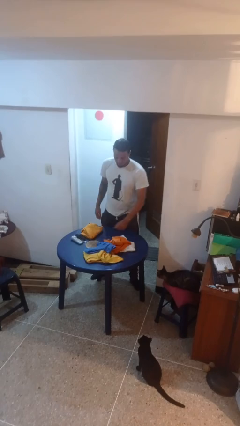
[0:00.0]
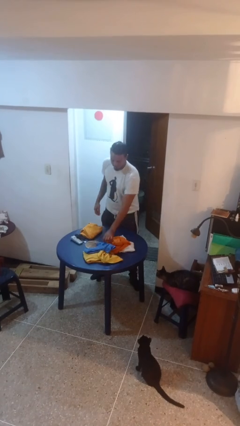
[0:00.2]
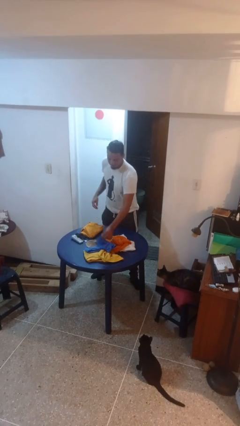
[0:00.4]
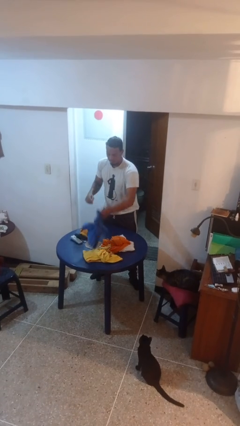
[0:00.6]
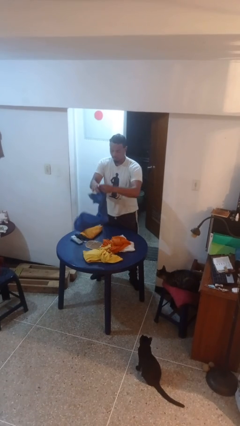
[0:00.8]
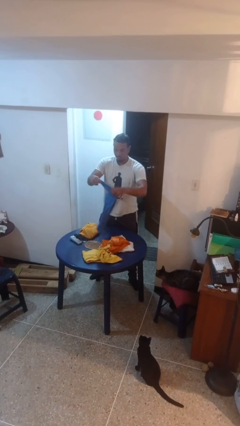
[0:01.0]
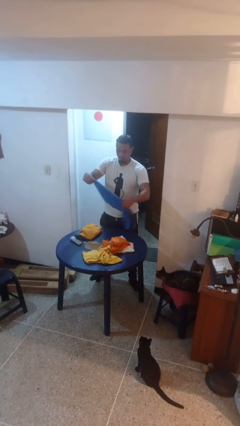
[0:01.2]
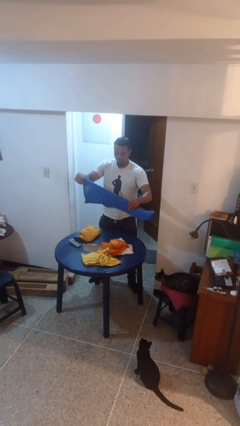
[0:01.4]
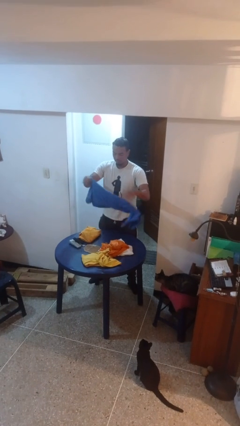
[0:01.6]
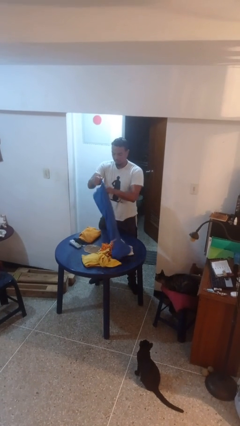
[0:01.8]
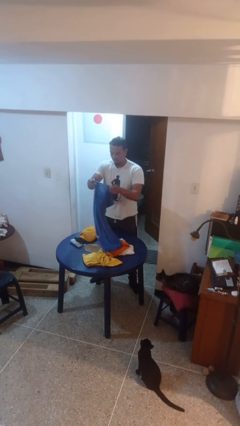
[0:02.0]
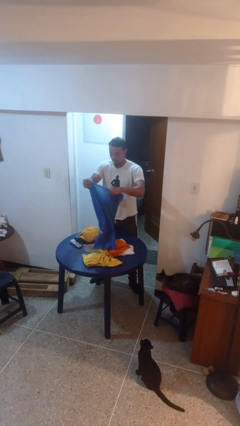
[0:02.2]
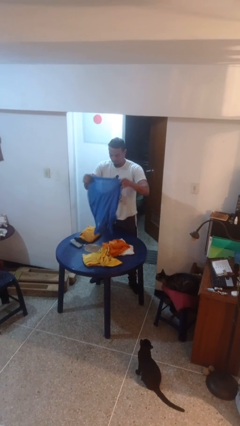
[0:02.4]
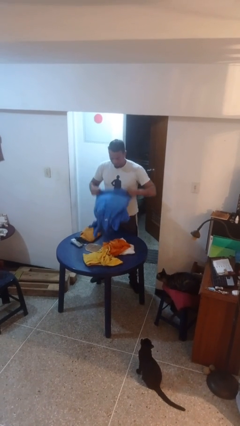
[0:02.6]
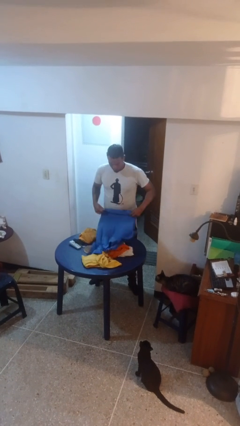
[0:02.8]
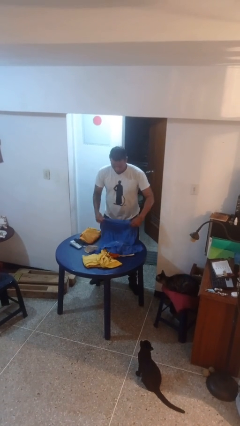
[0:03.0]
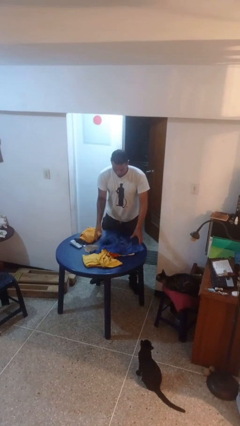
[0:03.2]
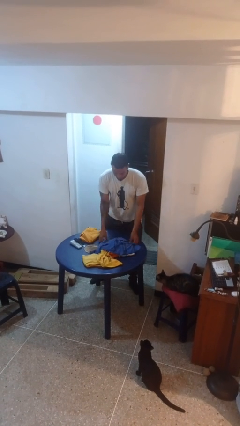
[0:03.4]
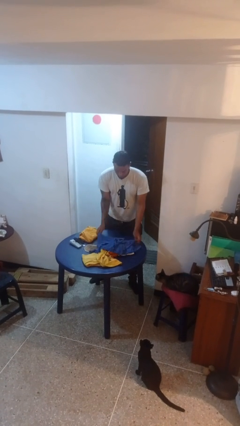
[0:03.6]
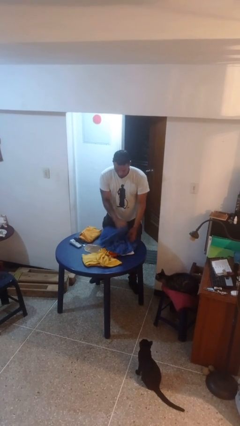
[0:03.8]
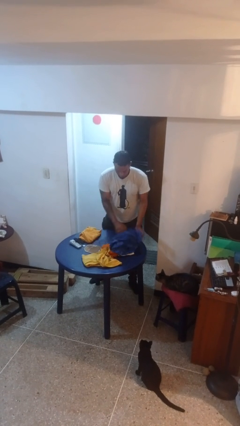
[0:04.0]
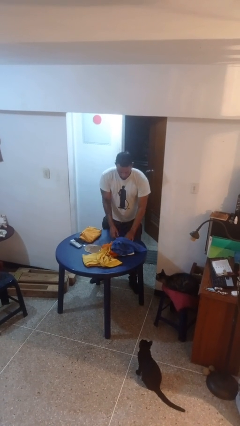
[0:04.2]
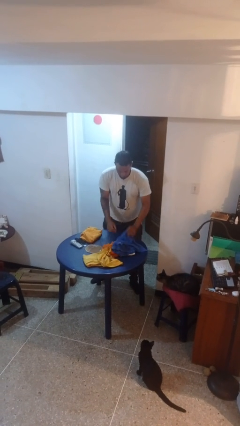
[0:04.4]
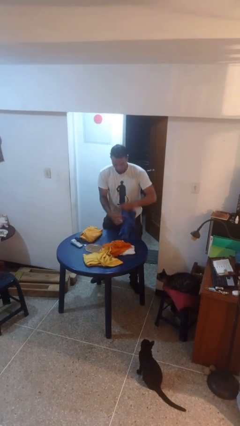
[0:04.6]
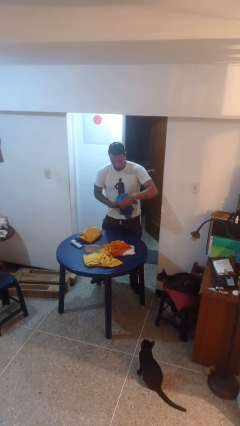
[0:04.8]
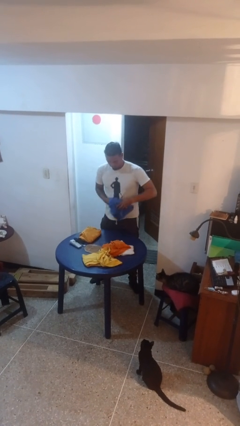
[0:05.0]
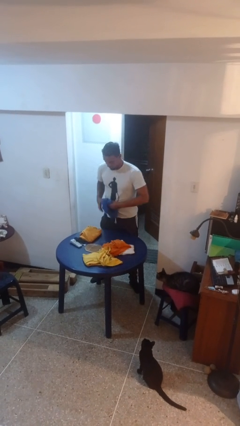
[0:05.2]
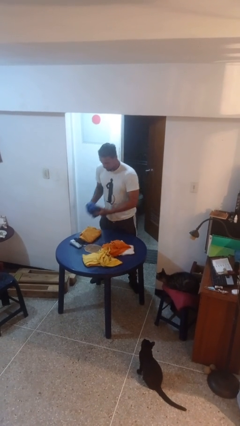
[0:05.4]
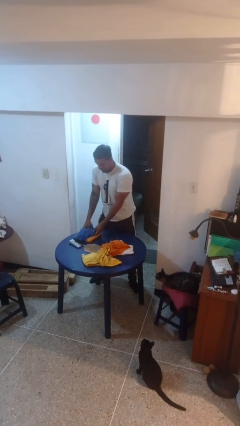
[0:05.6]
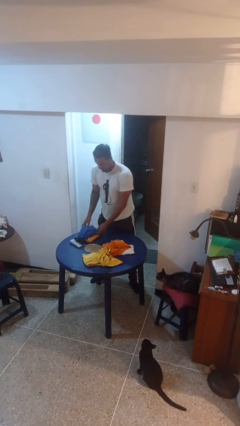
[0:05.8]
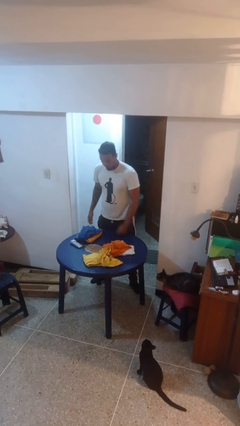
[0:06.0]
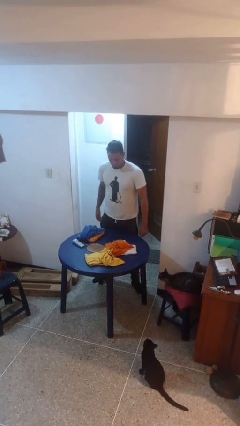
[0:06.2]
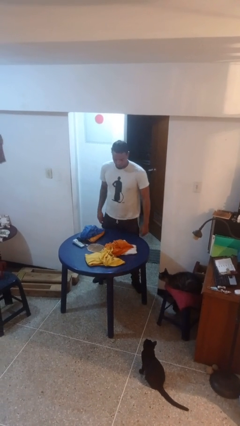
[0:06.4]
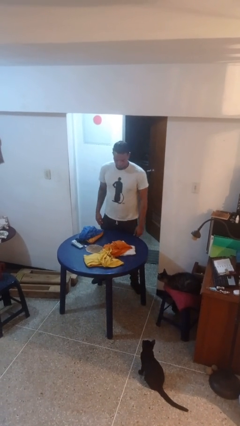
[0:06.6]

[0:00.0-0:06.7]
person folds shirt

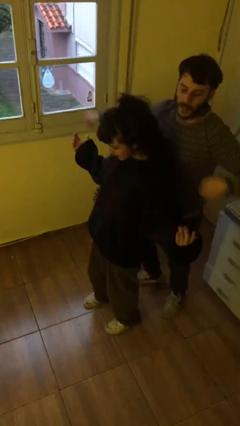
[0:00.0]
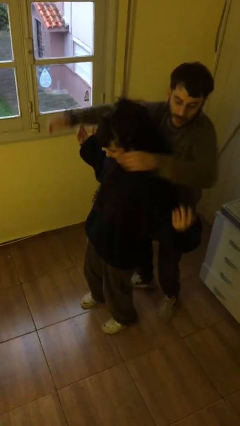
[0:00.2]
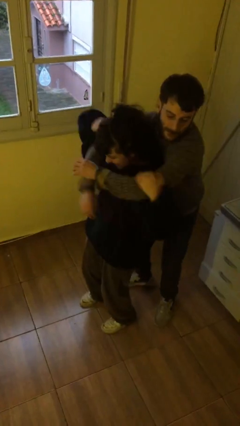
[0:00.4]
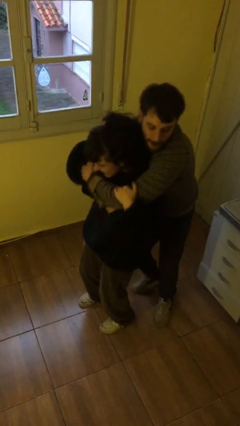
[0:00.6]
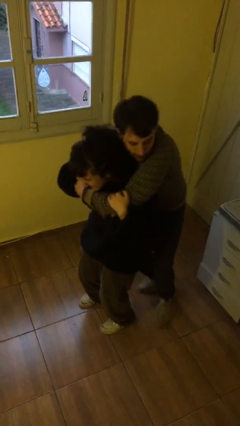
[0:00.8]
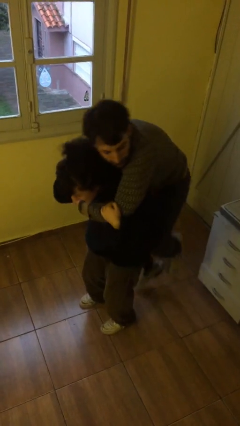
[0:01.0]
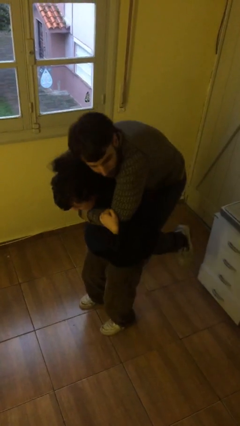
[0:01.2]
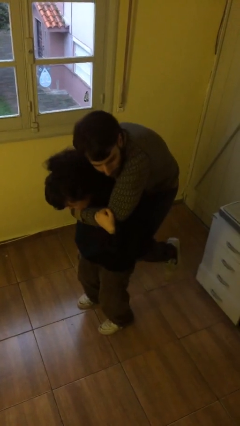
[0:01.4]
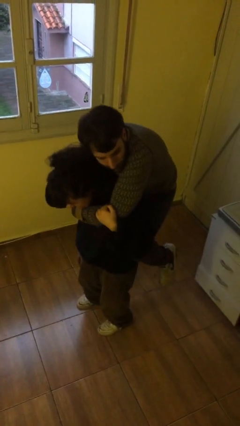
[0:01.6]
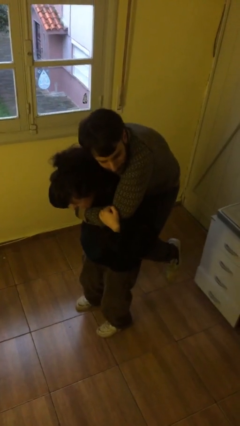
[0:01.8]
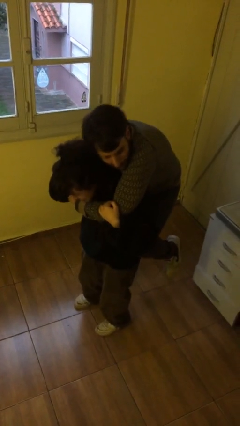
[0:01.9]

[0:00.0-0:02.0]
person picks up person

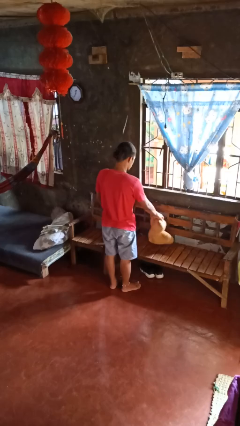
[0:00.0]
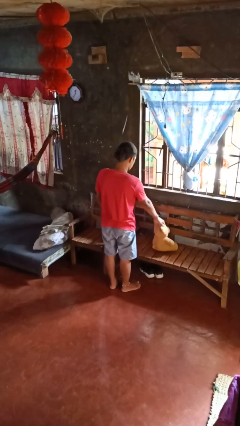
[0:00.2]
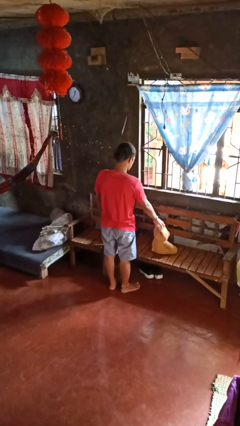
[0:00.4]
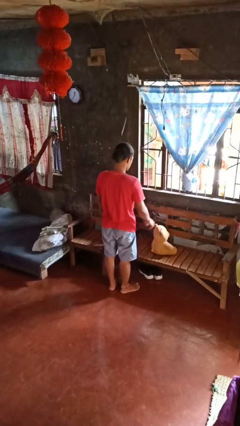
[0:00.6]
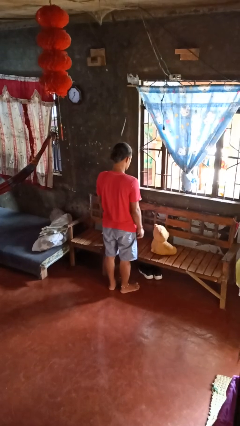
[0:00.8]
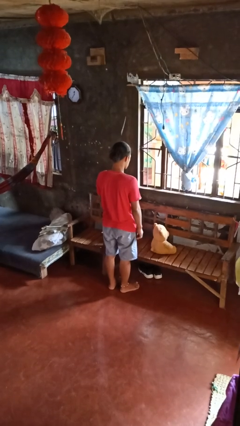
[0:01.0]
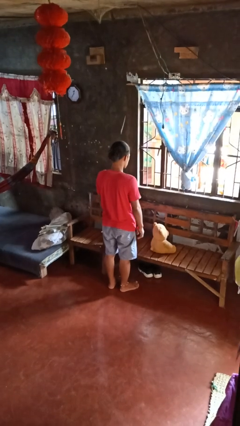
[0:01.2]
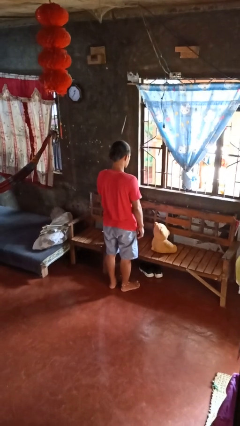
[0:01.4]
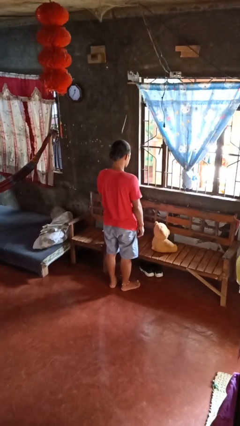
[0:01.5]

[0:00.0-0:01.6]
person puts down object on couch

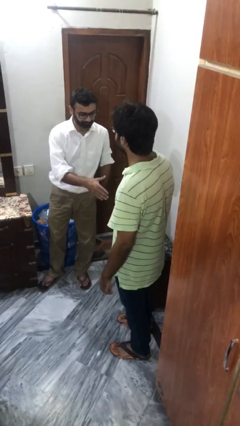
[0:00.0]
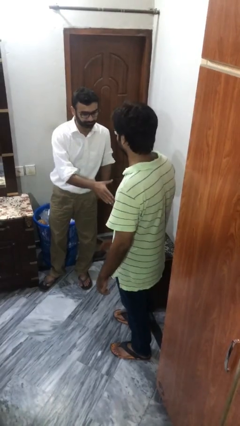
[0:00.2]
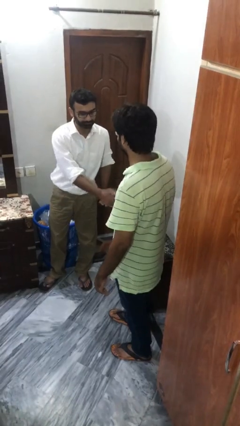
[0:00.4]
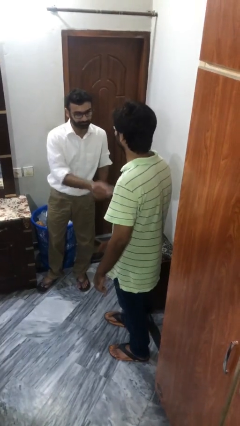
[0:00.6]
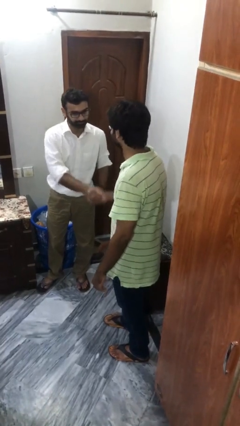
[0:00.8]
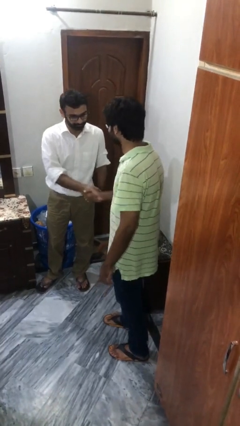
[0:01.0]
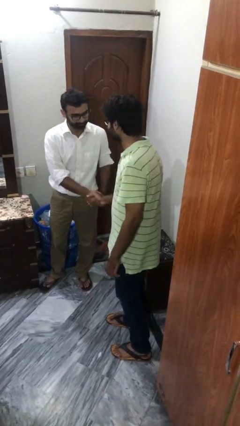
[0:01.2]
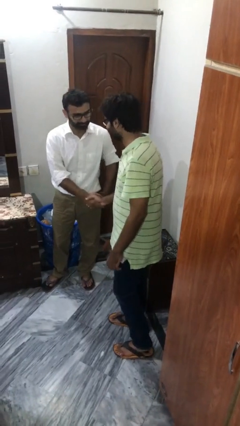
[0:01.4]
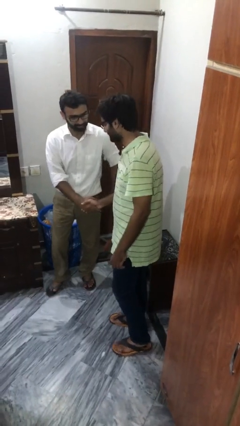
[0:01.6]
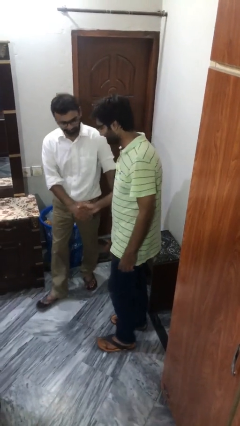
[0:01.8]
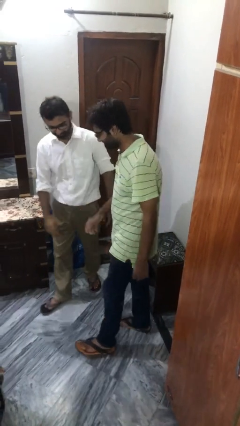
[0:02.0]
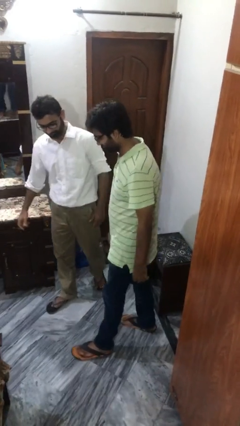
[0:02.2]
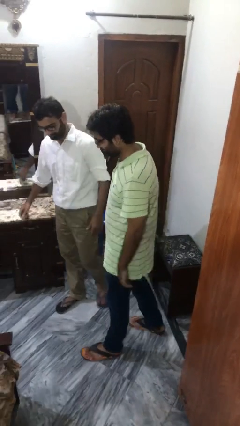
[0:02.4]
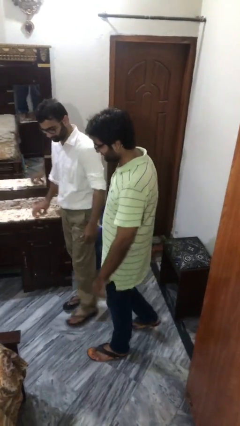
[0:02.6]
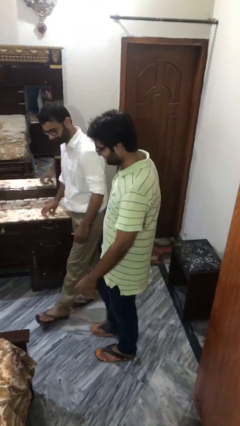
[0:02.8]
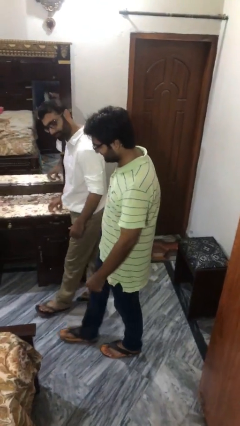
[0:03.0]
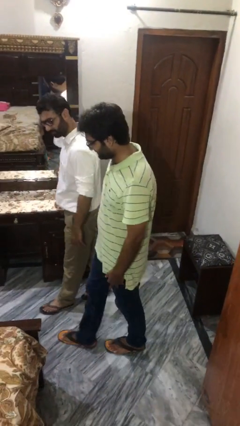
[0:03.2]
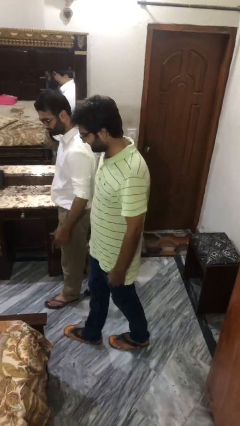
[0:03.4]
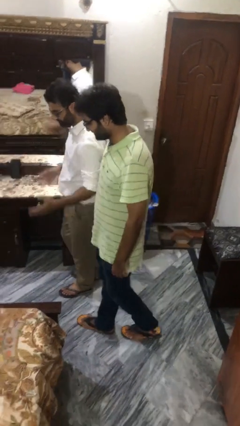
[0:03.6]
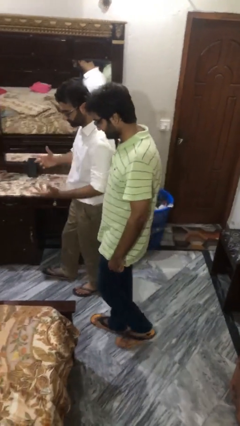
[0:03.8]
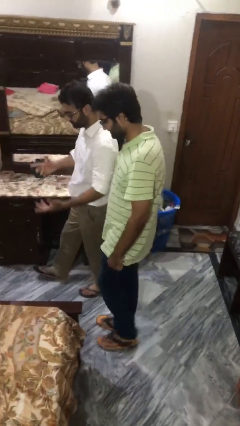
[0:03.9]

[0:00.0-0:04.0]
person shakes hand

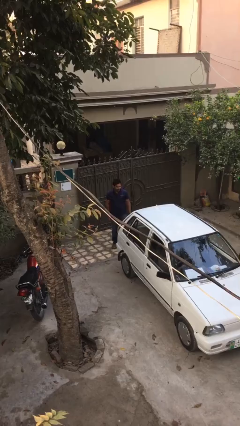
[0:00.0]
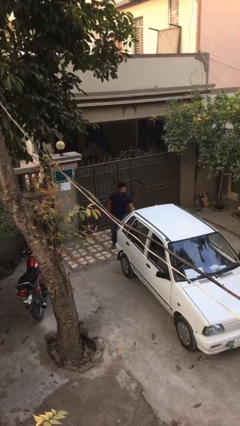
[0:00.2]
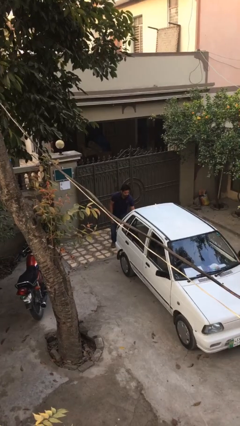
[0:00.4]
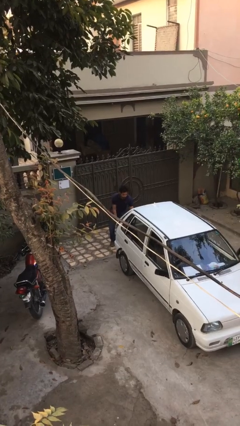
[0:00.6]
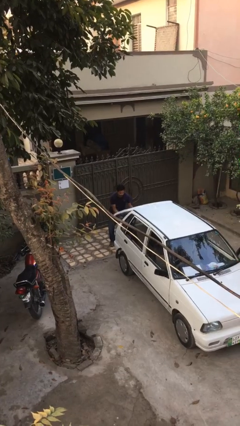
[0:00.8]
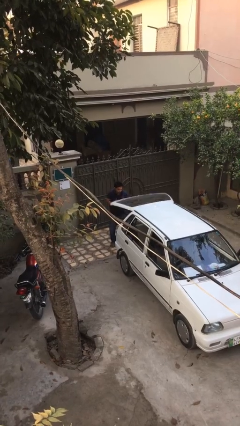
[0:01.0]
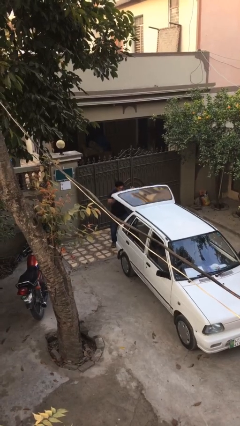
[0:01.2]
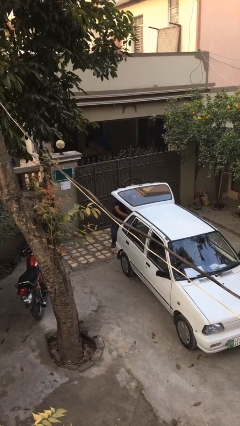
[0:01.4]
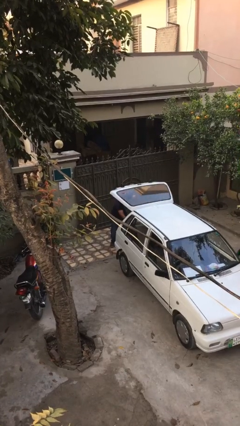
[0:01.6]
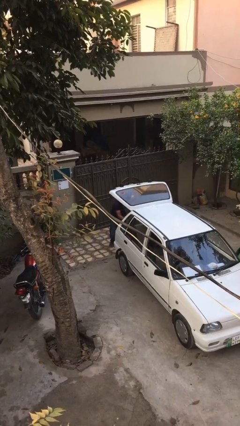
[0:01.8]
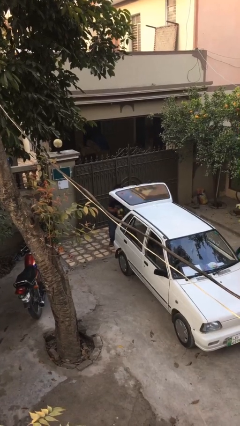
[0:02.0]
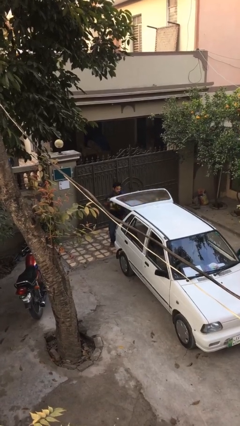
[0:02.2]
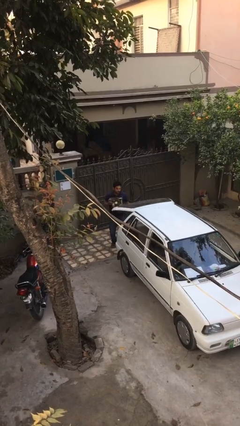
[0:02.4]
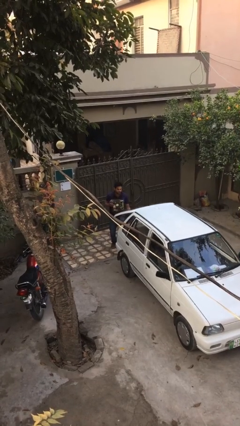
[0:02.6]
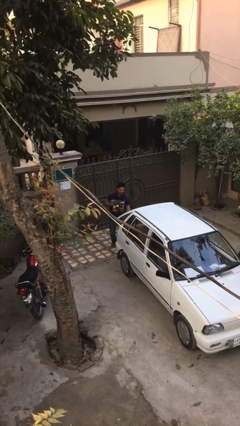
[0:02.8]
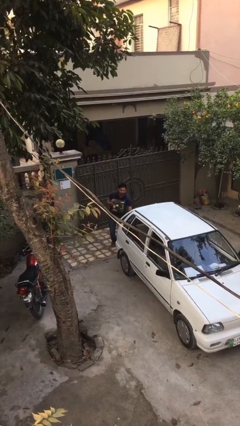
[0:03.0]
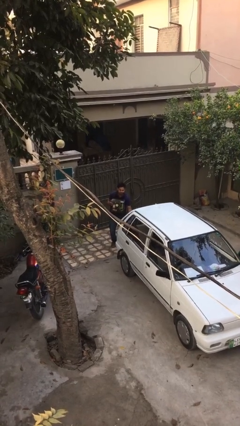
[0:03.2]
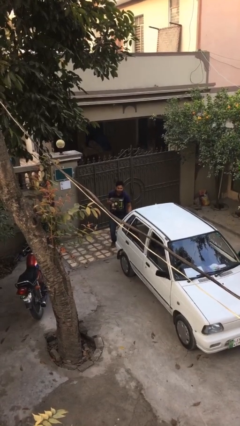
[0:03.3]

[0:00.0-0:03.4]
person unloads car
